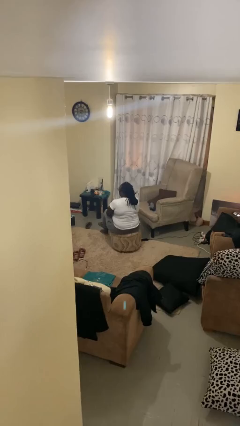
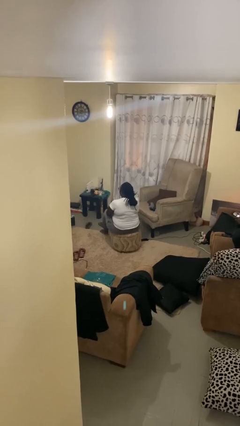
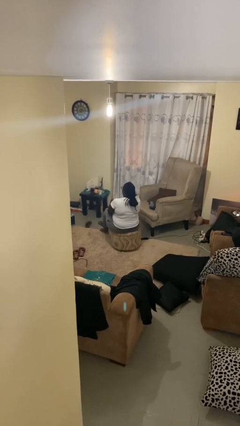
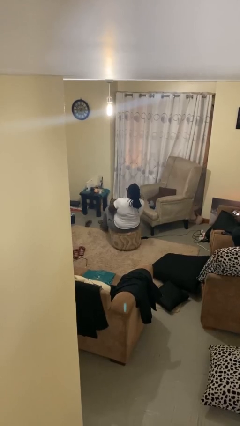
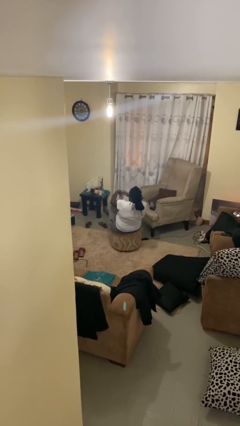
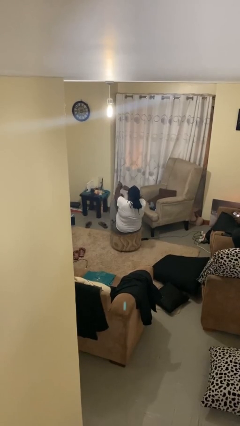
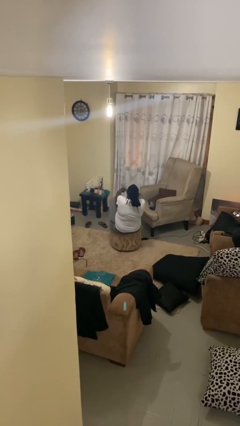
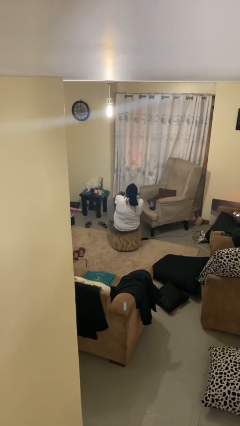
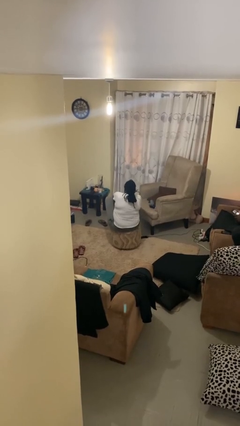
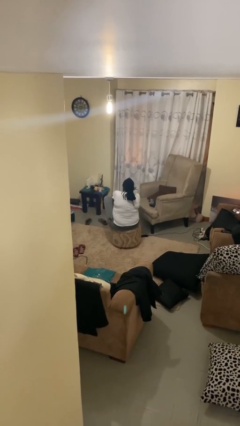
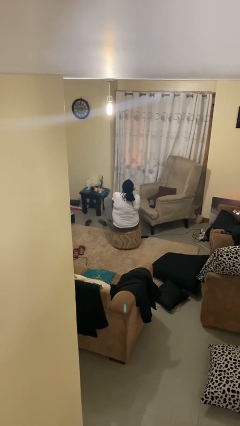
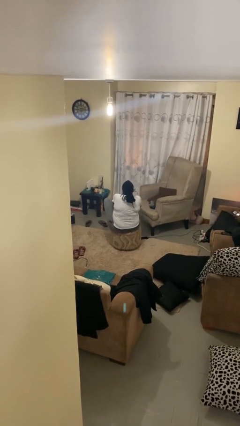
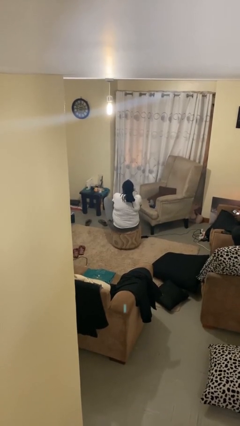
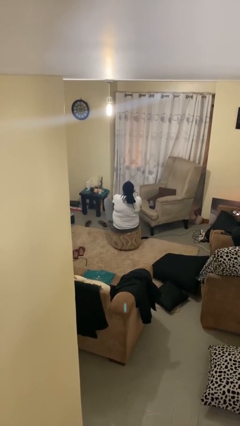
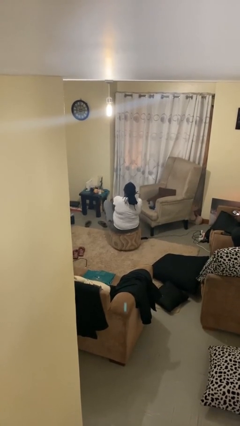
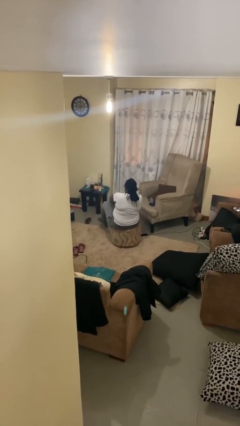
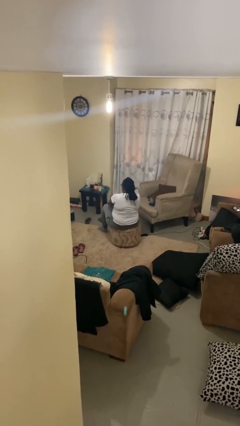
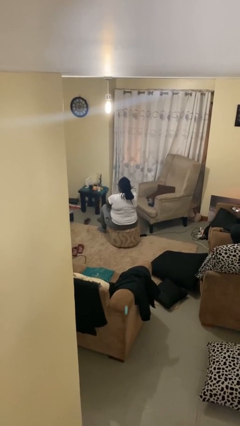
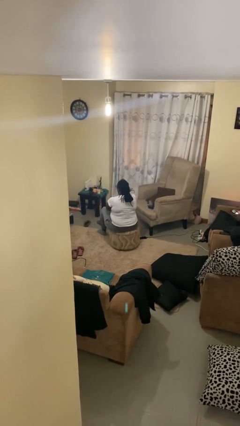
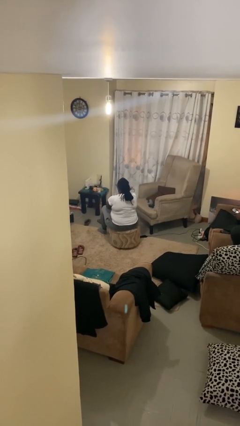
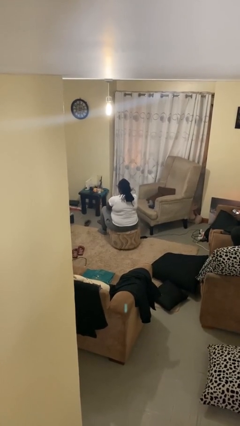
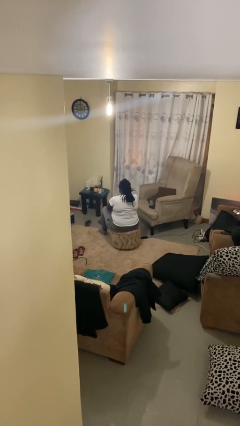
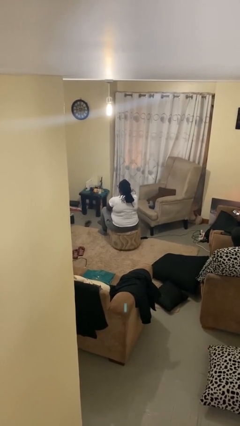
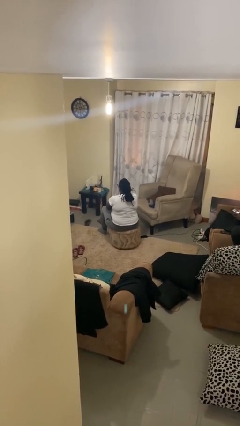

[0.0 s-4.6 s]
person puts on socks

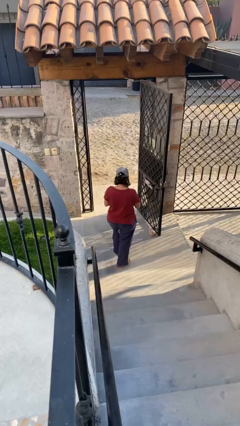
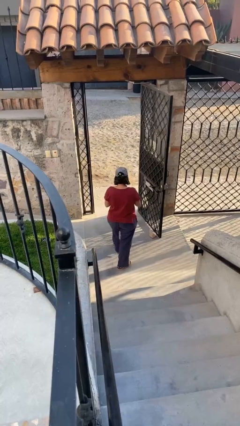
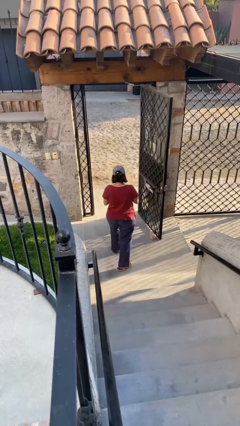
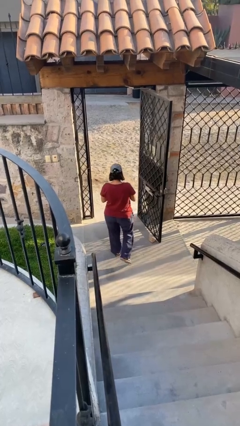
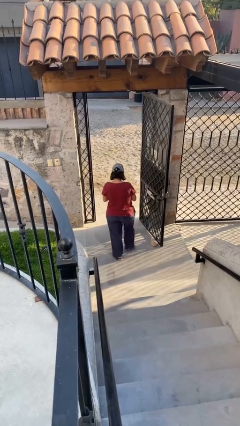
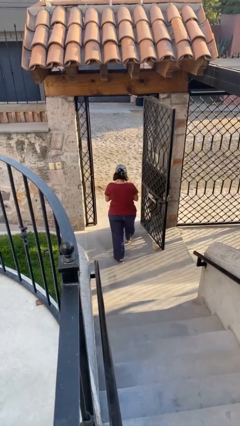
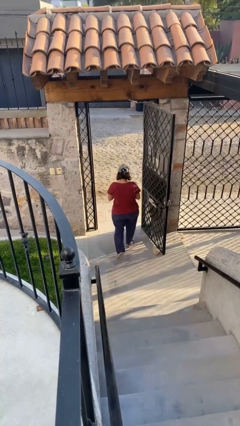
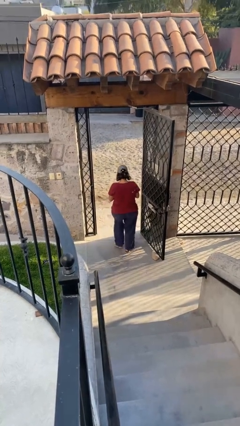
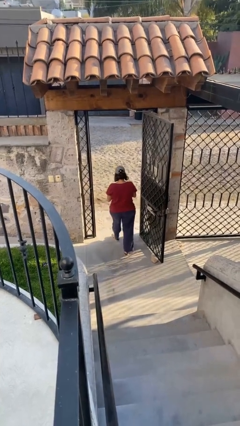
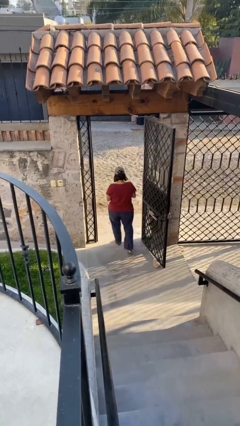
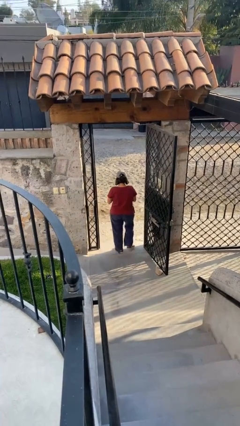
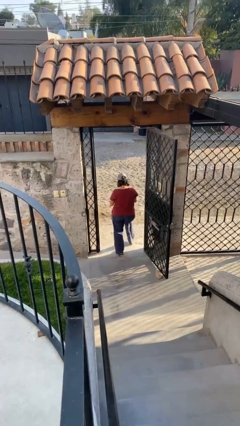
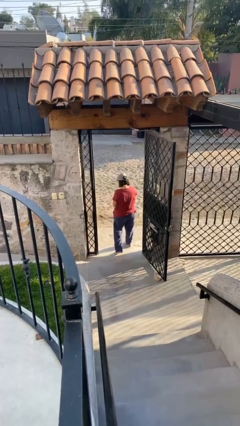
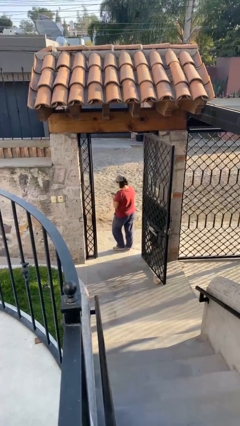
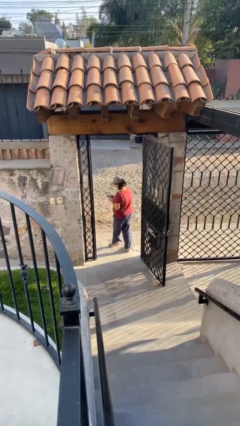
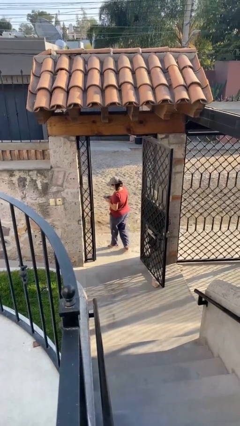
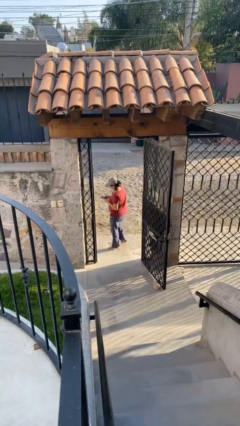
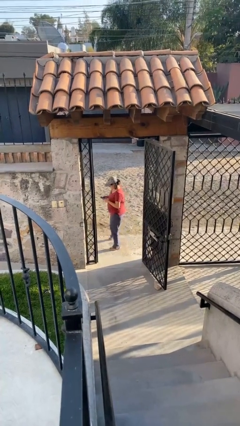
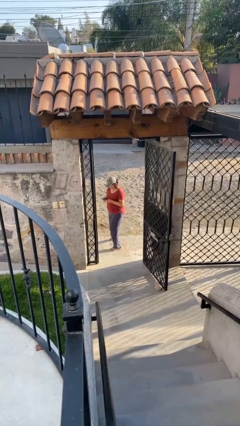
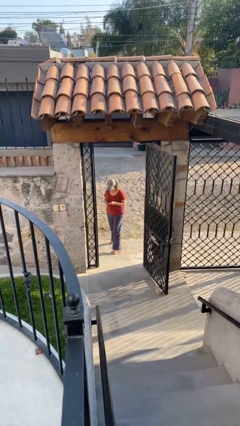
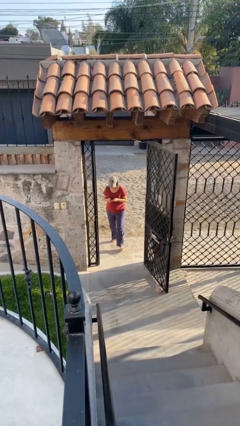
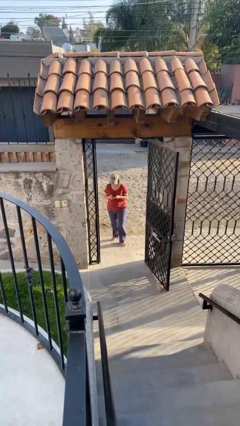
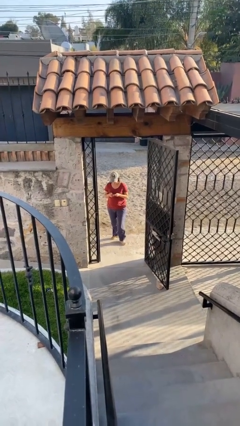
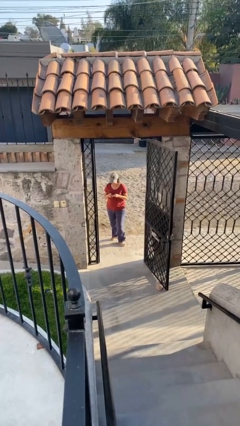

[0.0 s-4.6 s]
person exits scene through structure

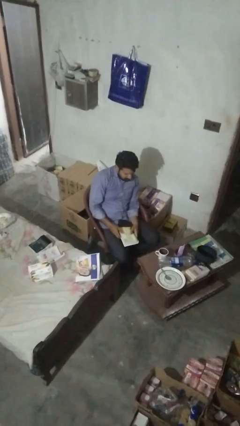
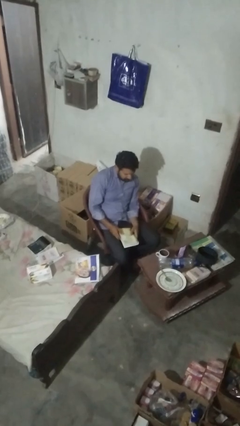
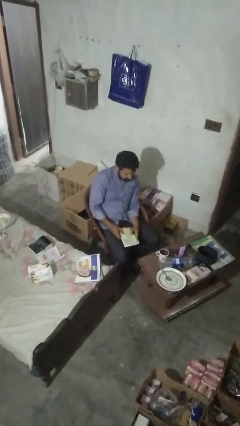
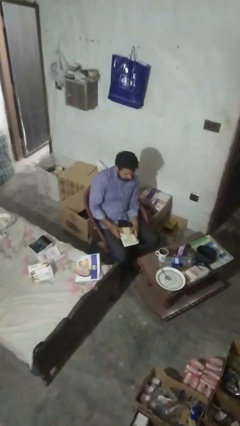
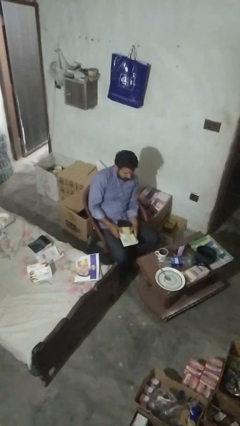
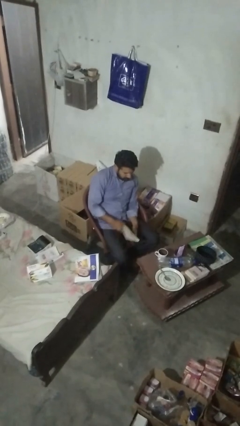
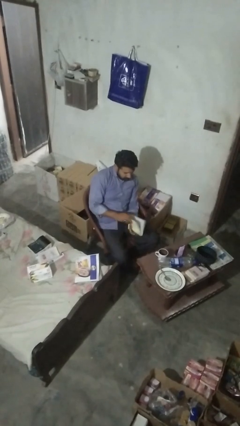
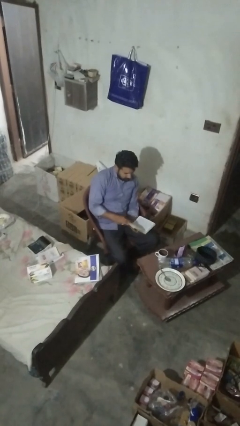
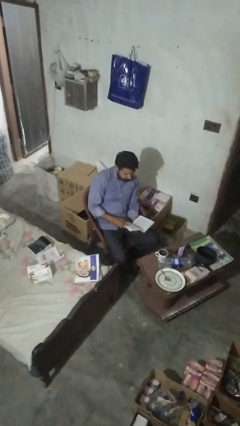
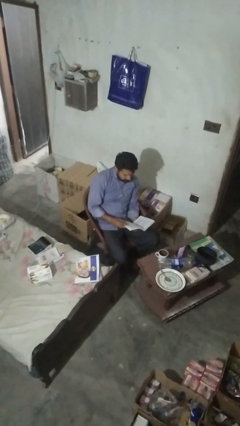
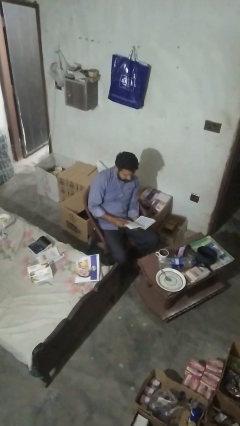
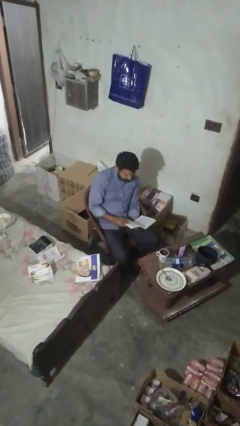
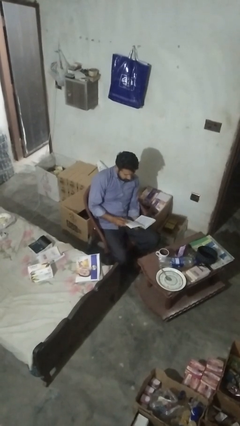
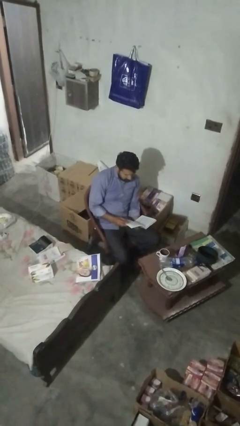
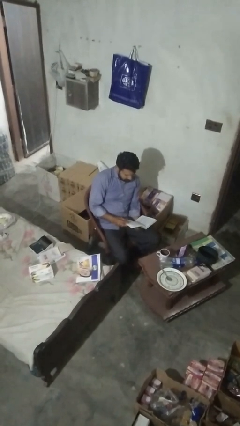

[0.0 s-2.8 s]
person reads book

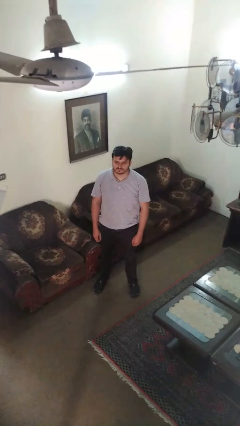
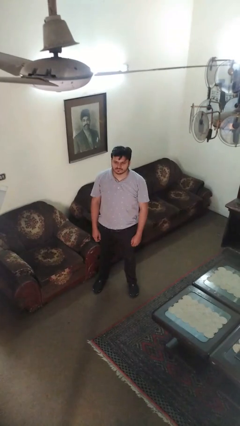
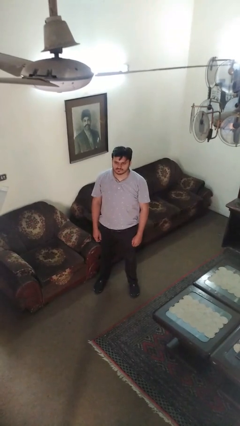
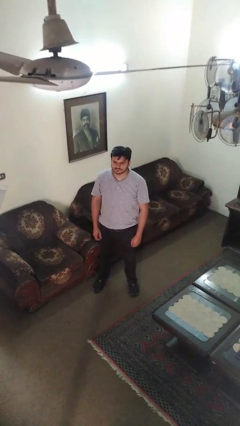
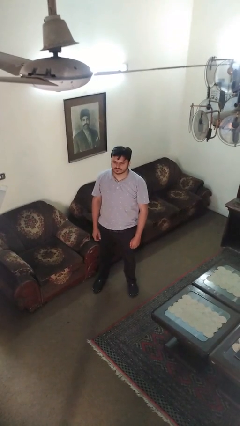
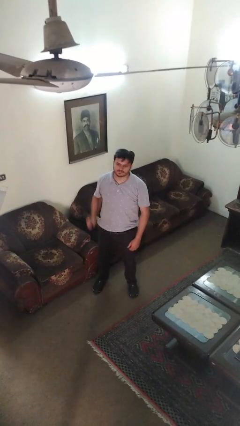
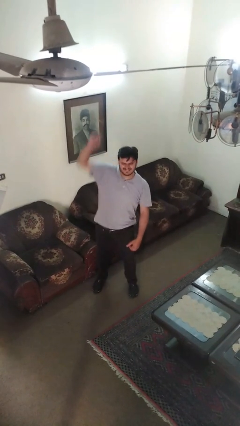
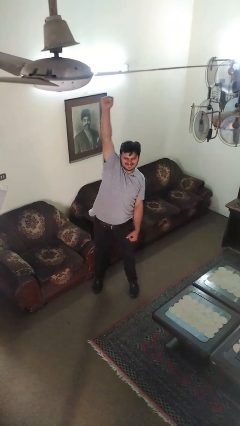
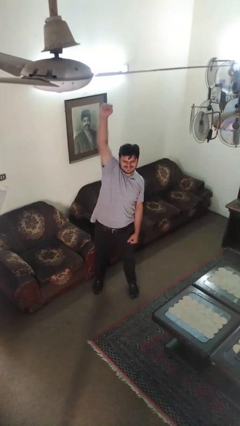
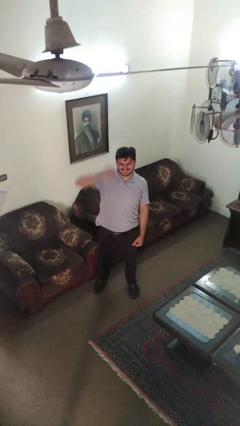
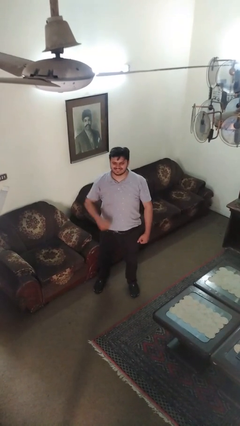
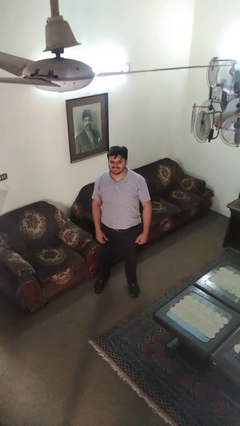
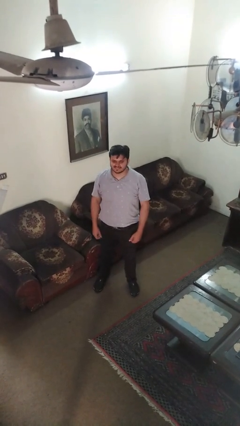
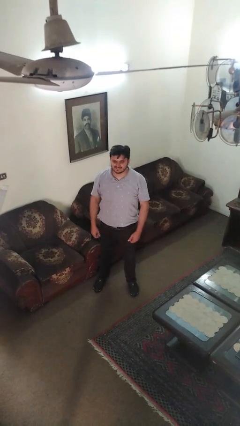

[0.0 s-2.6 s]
person punches

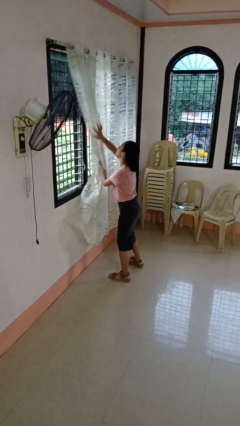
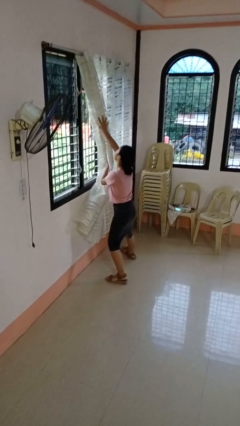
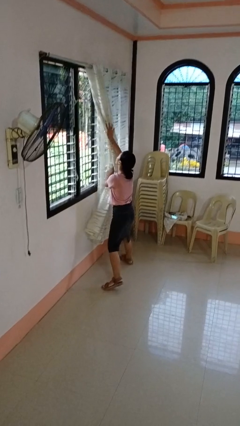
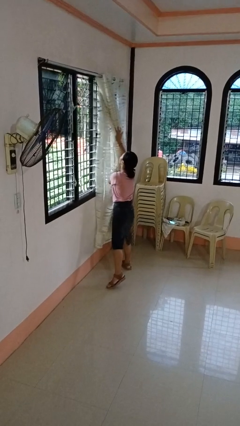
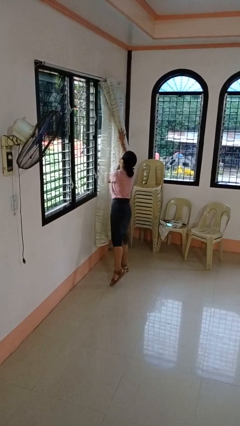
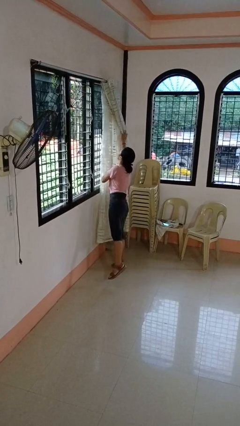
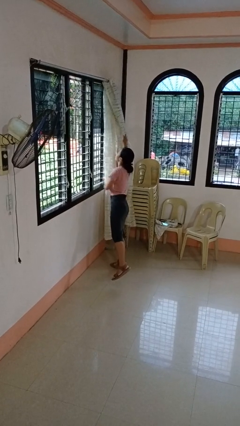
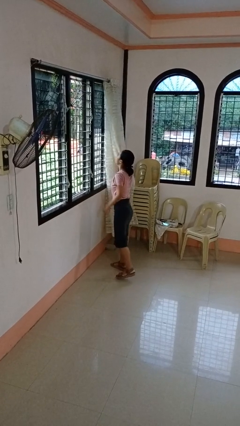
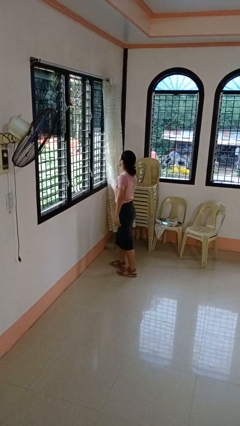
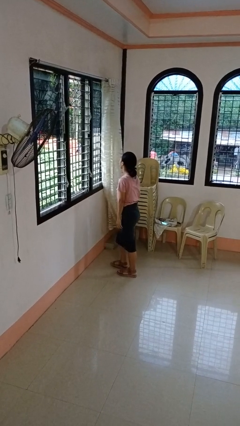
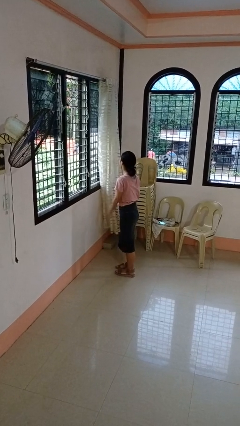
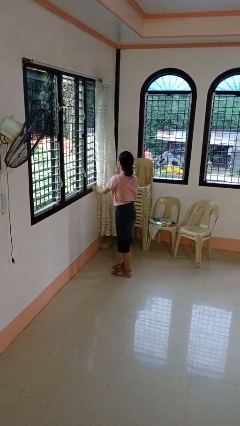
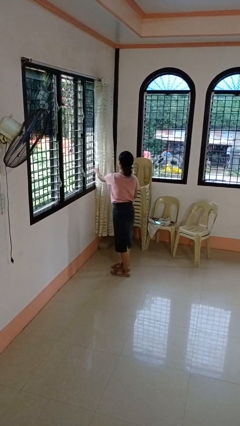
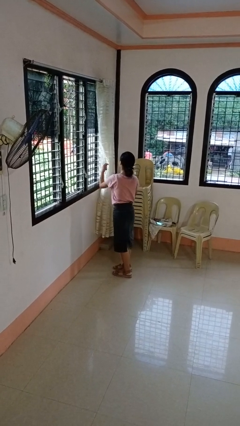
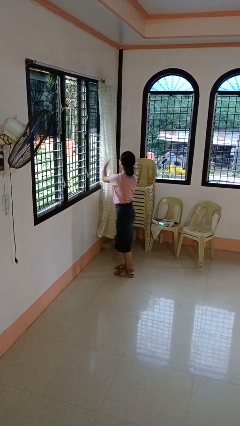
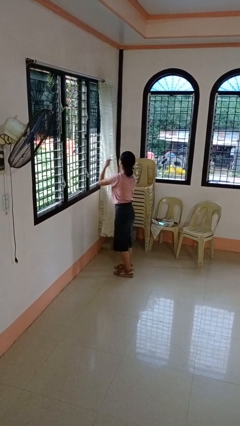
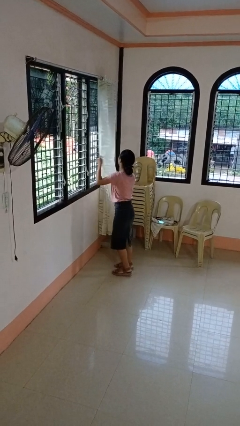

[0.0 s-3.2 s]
person opens curtains
